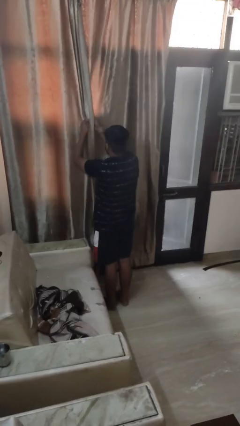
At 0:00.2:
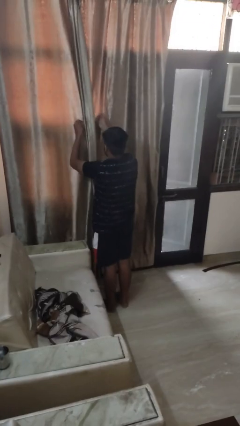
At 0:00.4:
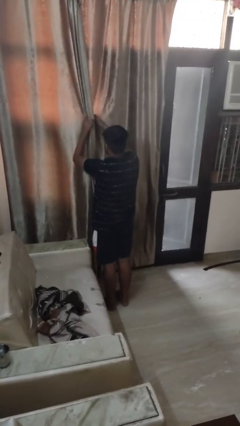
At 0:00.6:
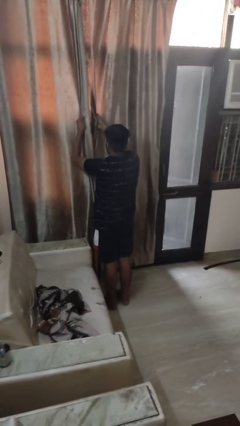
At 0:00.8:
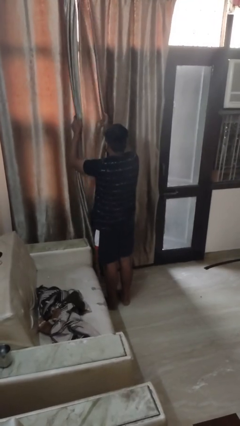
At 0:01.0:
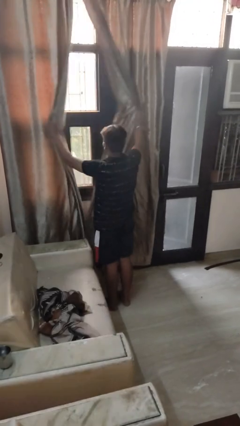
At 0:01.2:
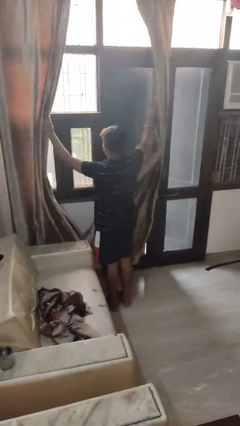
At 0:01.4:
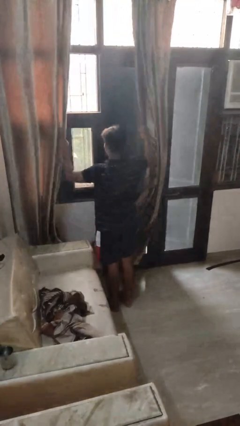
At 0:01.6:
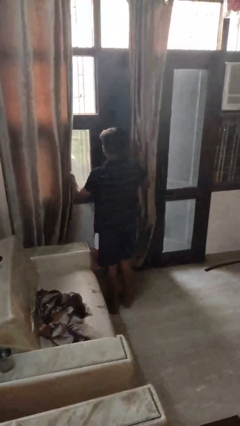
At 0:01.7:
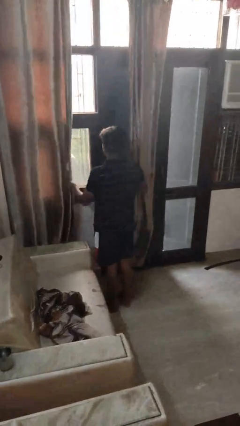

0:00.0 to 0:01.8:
person opens curtains

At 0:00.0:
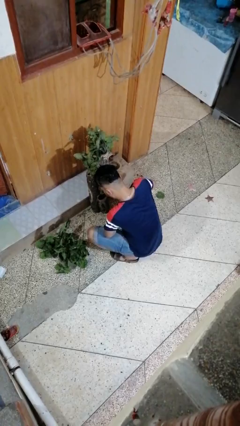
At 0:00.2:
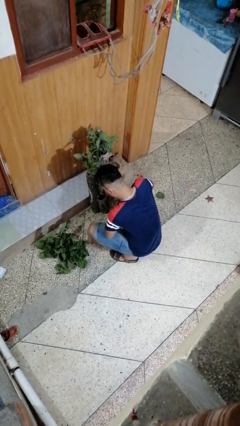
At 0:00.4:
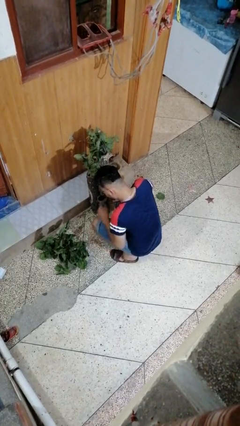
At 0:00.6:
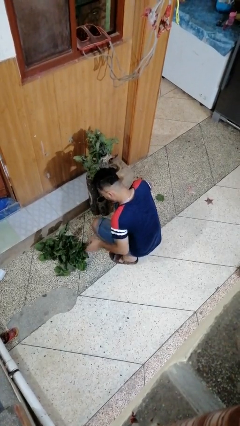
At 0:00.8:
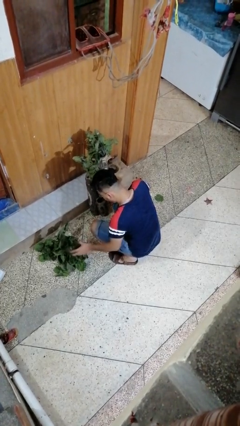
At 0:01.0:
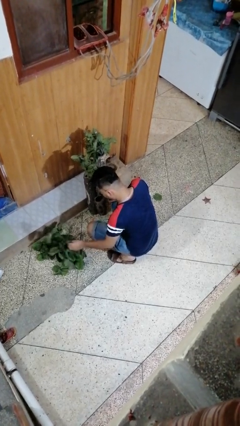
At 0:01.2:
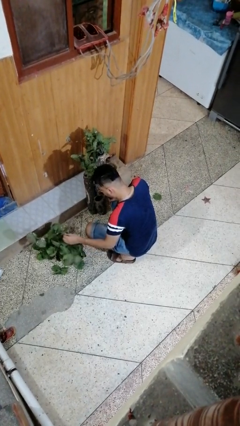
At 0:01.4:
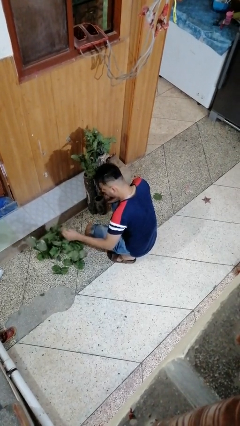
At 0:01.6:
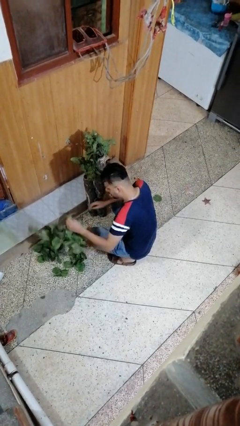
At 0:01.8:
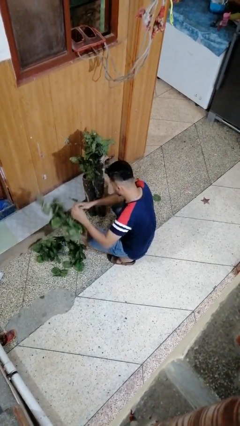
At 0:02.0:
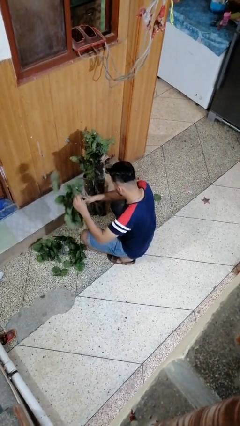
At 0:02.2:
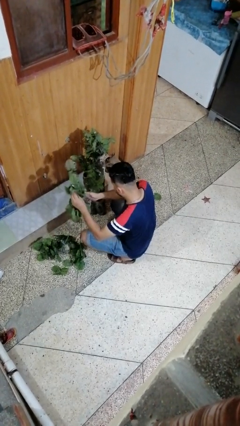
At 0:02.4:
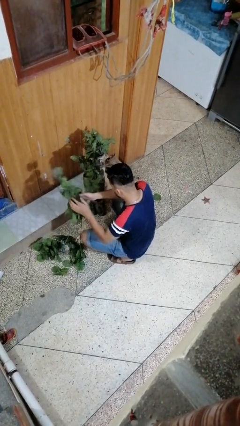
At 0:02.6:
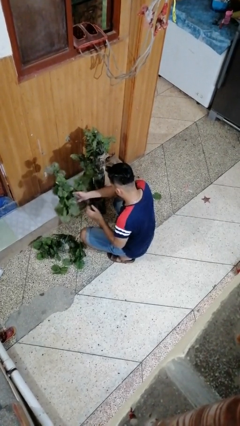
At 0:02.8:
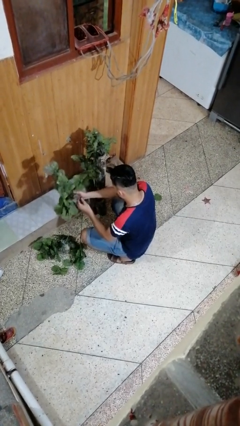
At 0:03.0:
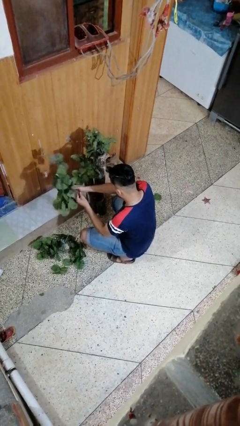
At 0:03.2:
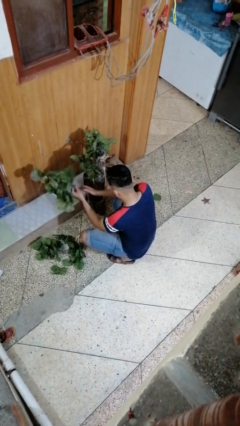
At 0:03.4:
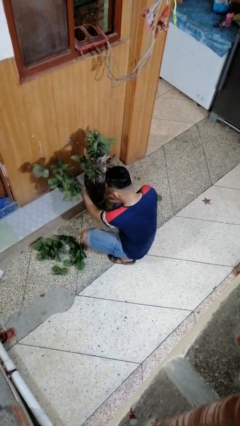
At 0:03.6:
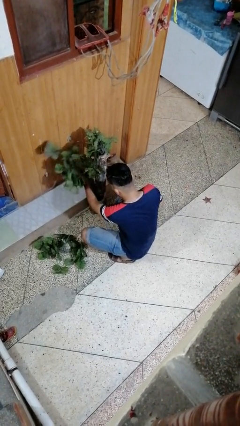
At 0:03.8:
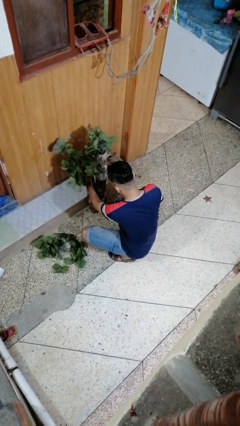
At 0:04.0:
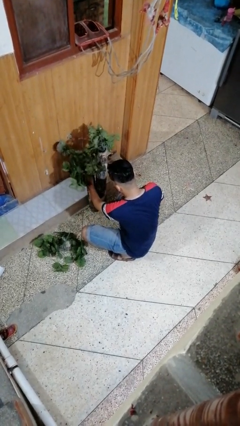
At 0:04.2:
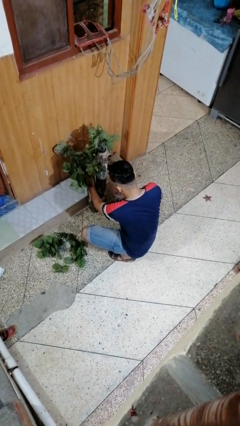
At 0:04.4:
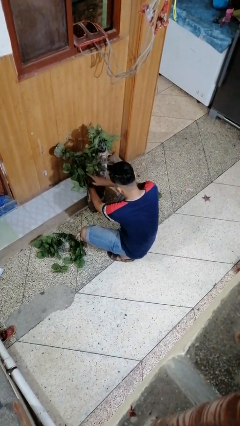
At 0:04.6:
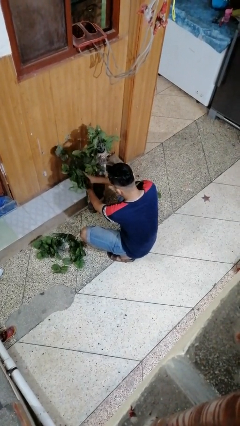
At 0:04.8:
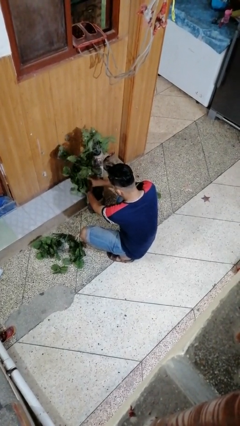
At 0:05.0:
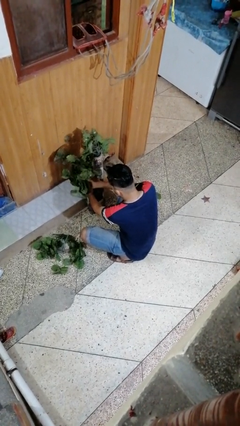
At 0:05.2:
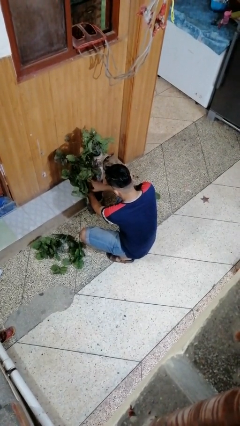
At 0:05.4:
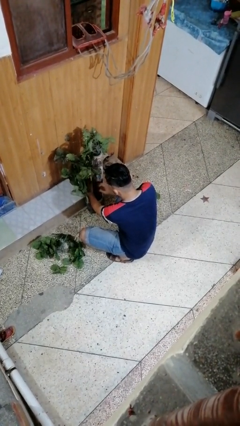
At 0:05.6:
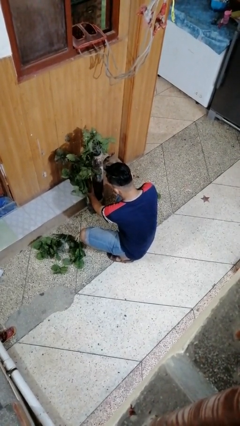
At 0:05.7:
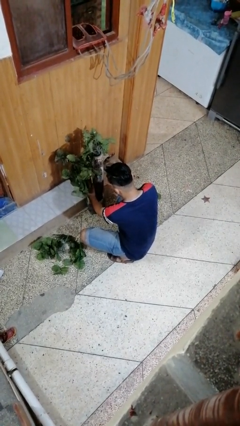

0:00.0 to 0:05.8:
person arranges flowers in vase

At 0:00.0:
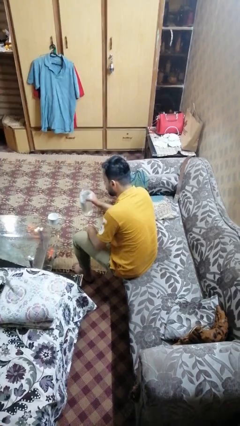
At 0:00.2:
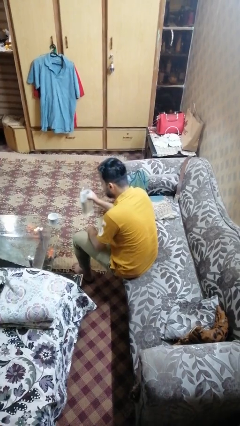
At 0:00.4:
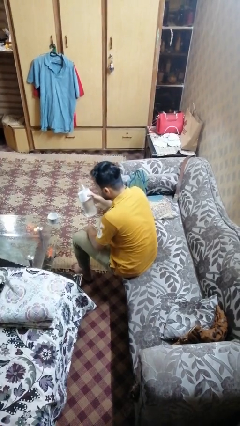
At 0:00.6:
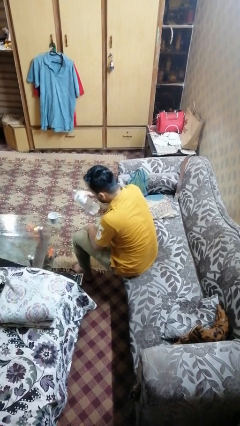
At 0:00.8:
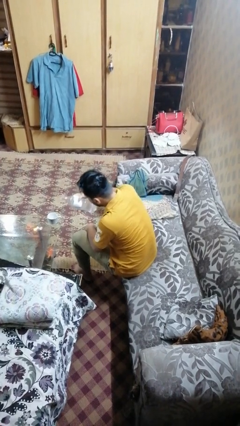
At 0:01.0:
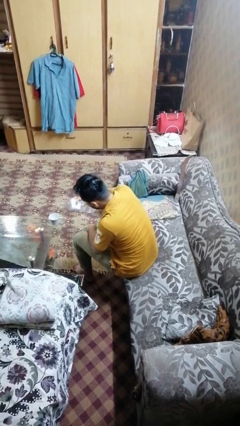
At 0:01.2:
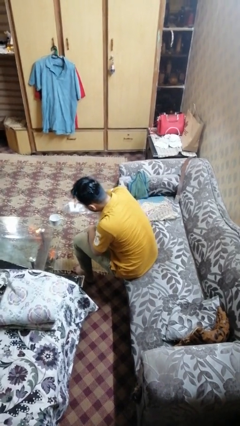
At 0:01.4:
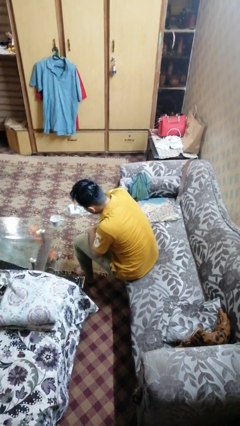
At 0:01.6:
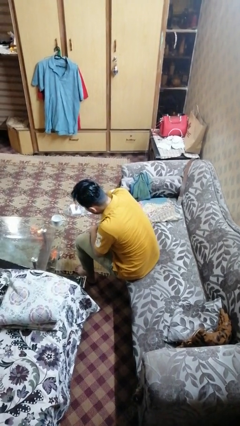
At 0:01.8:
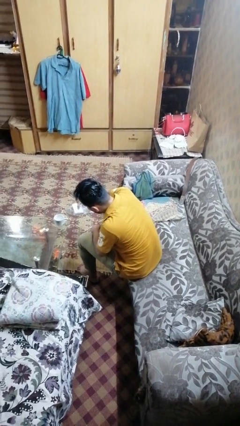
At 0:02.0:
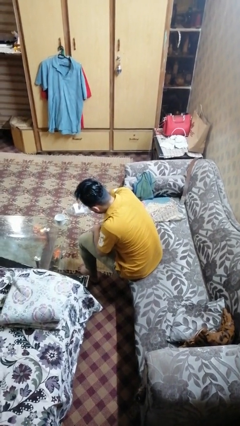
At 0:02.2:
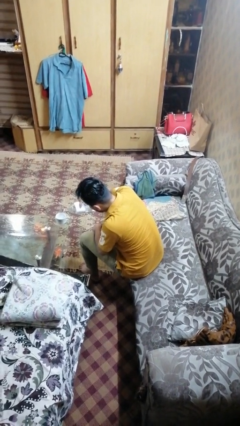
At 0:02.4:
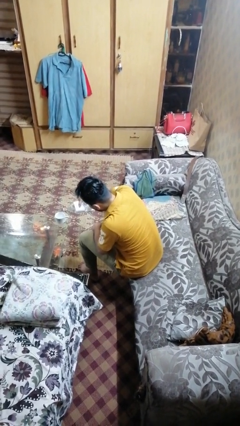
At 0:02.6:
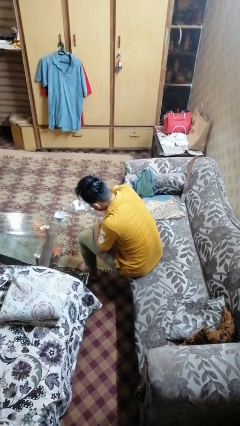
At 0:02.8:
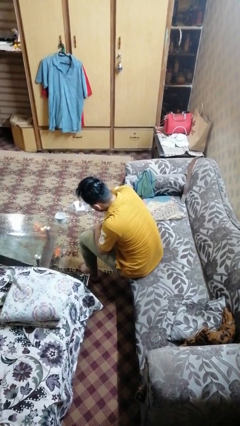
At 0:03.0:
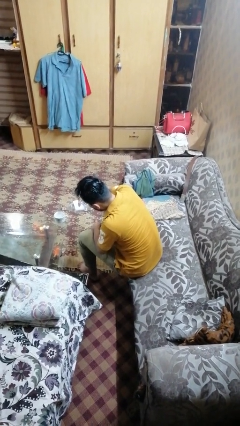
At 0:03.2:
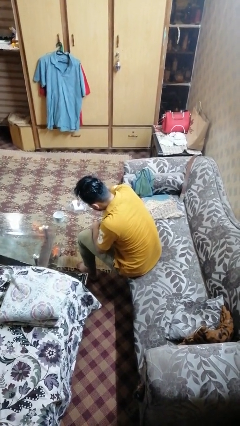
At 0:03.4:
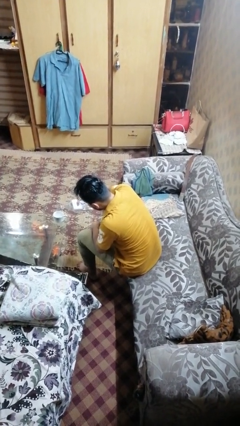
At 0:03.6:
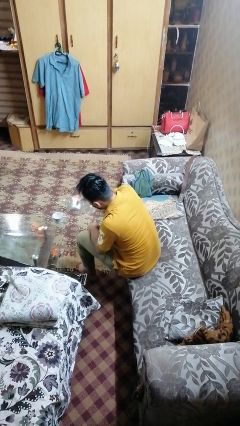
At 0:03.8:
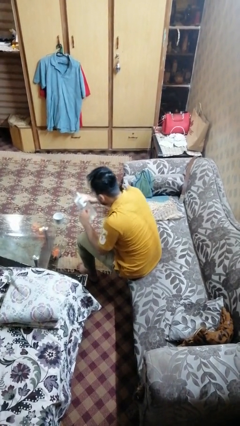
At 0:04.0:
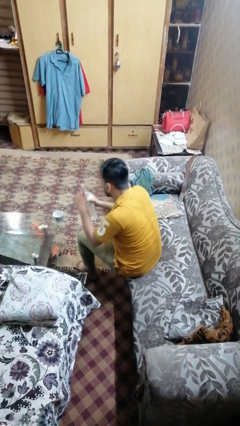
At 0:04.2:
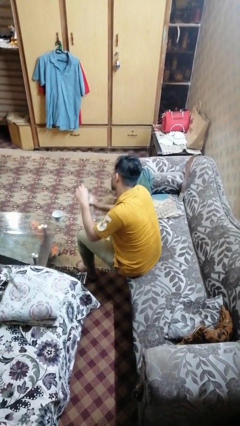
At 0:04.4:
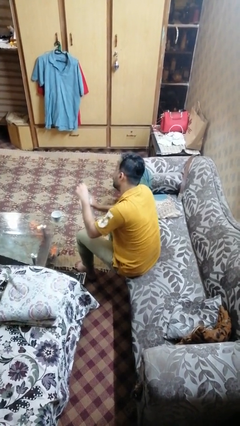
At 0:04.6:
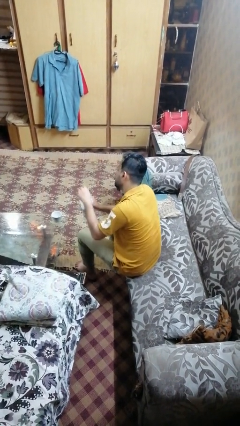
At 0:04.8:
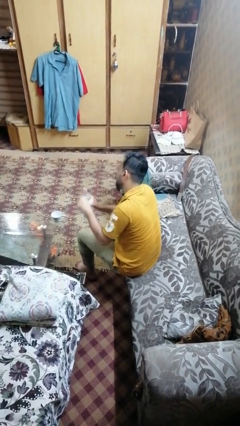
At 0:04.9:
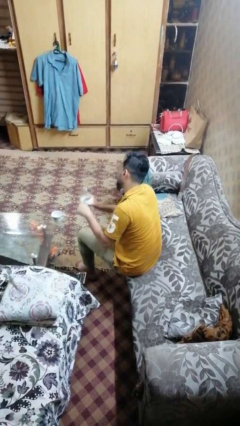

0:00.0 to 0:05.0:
person pours liquid into cup

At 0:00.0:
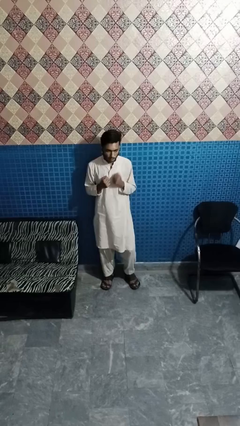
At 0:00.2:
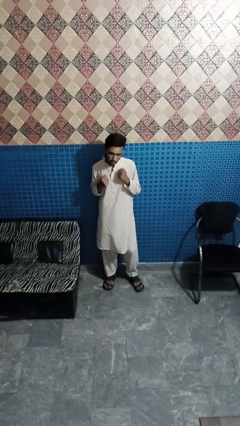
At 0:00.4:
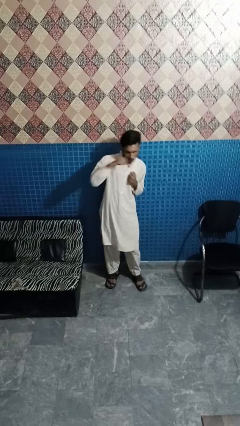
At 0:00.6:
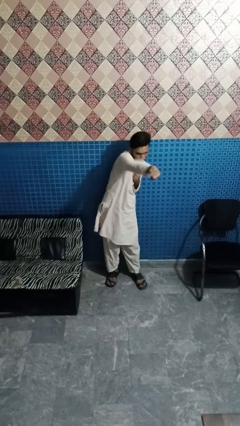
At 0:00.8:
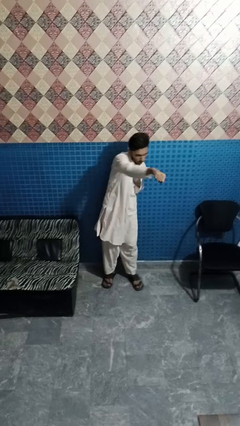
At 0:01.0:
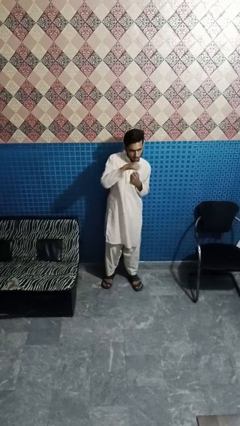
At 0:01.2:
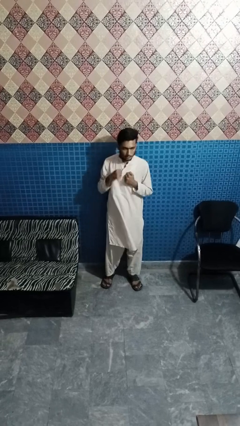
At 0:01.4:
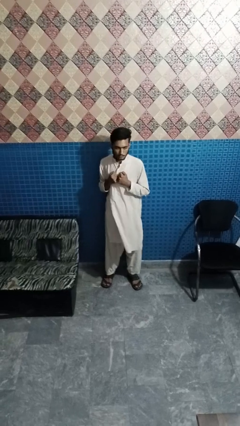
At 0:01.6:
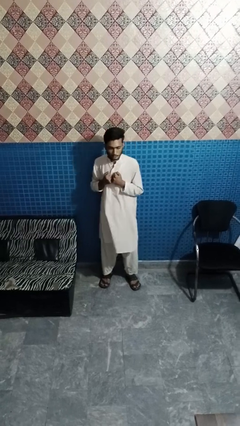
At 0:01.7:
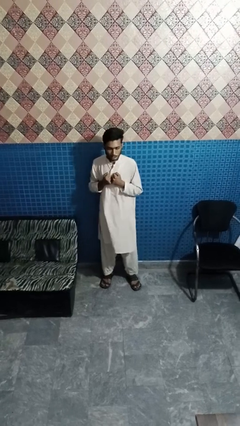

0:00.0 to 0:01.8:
person punches

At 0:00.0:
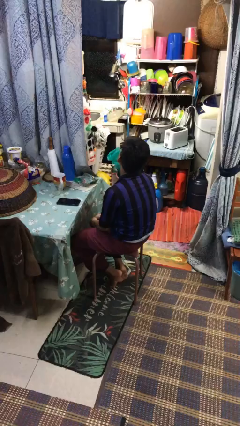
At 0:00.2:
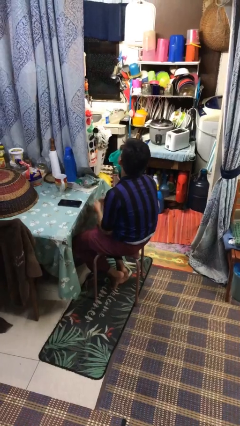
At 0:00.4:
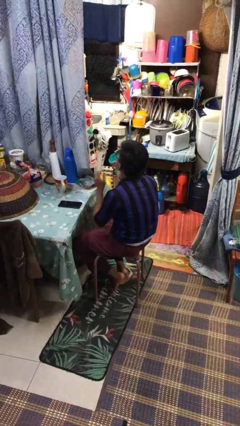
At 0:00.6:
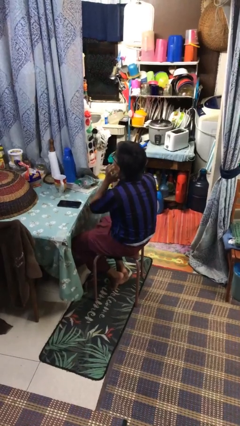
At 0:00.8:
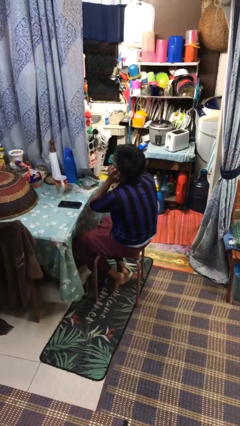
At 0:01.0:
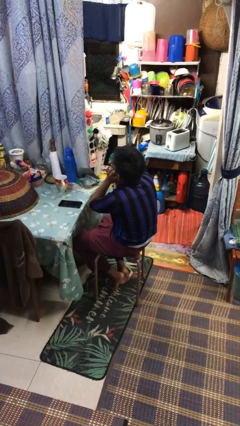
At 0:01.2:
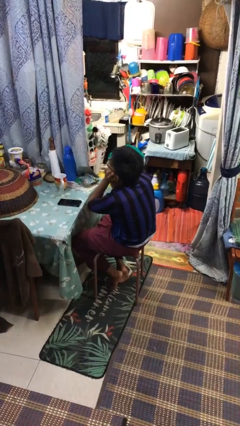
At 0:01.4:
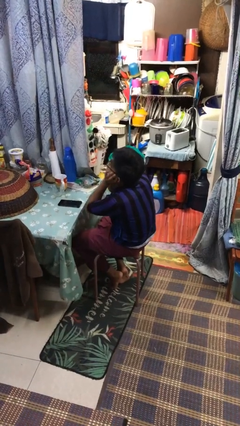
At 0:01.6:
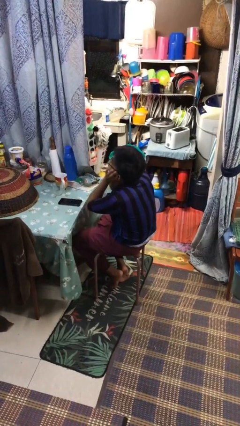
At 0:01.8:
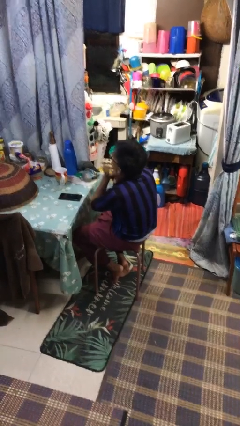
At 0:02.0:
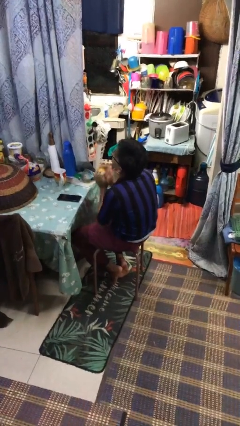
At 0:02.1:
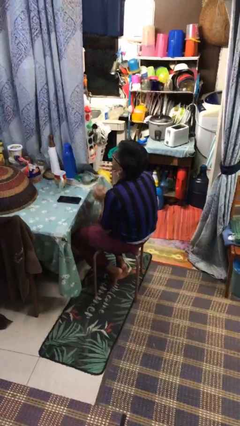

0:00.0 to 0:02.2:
person puts fingers in ear

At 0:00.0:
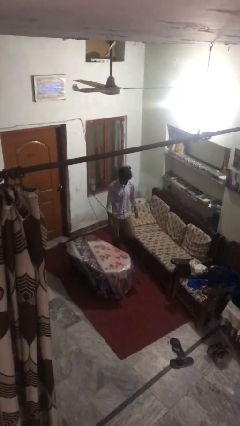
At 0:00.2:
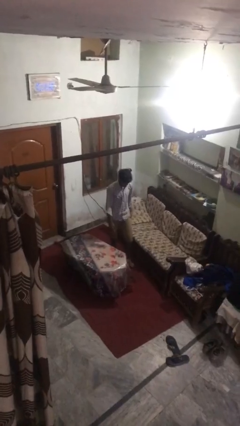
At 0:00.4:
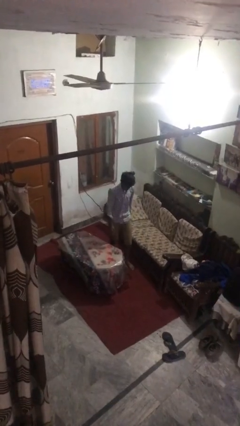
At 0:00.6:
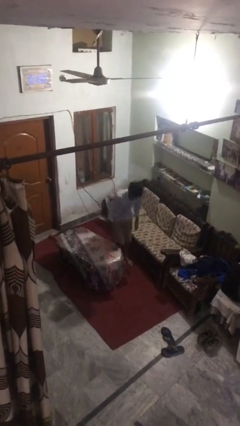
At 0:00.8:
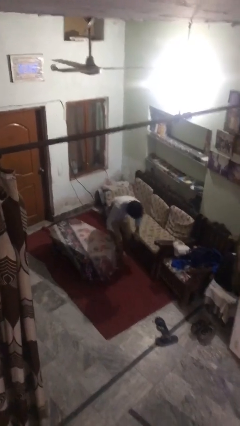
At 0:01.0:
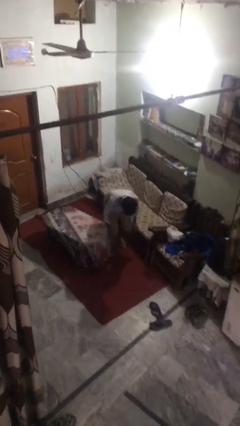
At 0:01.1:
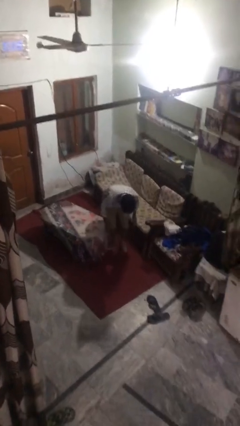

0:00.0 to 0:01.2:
person trips on object on floor
